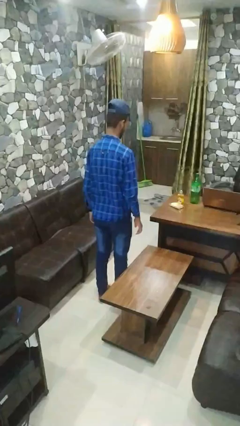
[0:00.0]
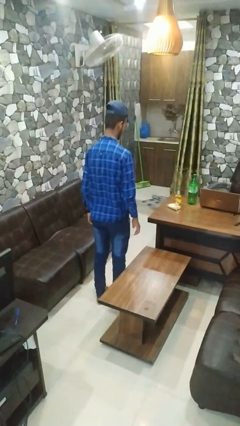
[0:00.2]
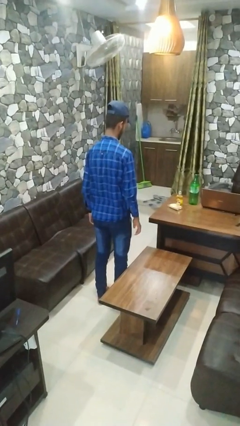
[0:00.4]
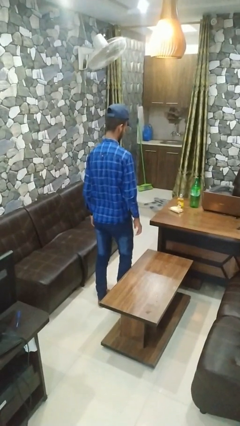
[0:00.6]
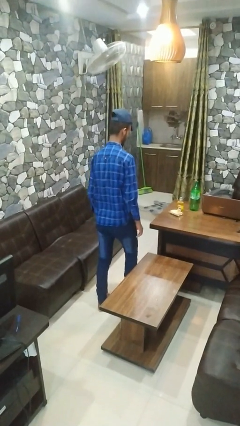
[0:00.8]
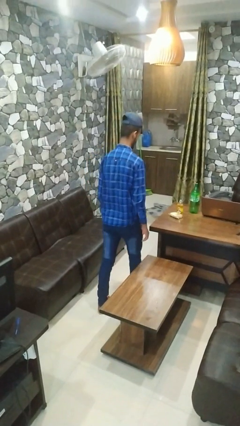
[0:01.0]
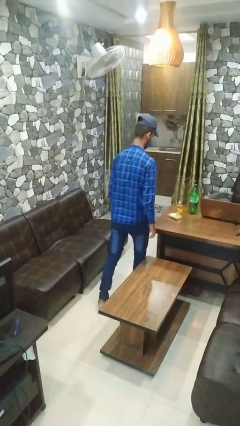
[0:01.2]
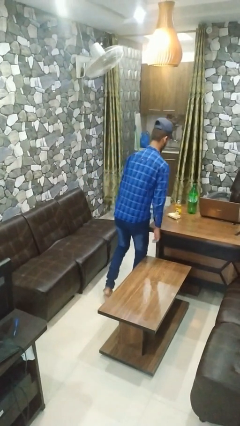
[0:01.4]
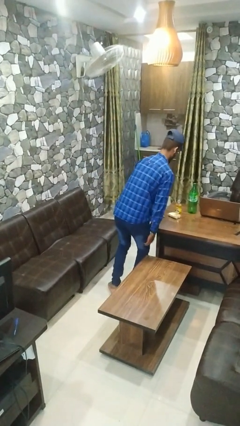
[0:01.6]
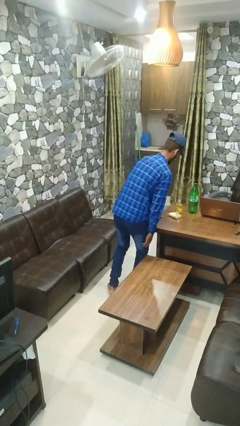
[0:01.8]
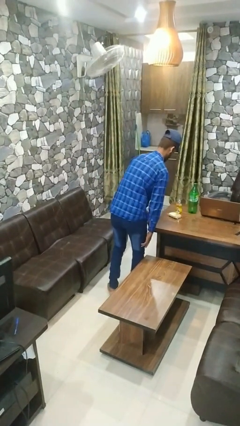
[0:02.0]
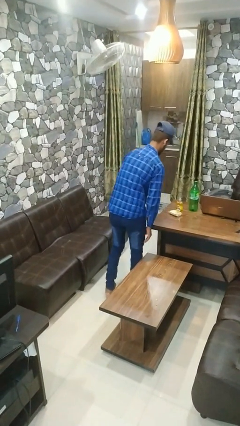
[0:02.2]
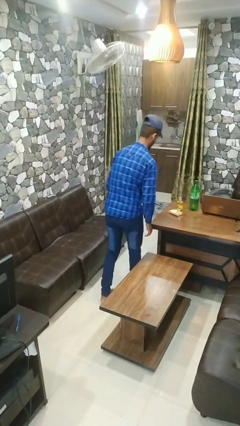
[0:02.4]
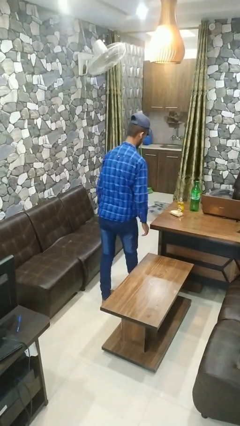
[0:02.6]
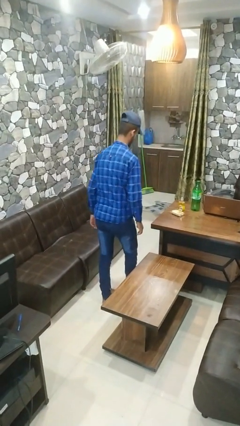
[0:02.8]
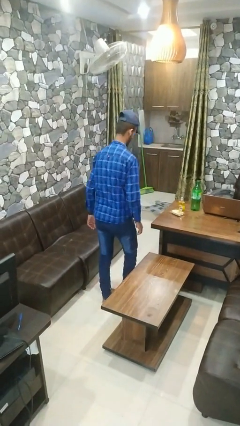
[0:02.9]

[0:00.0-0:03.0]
person bumps into table

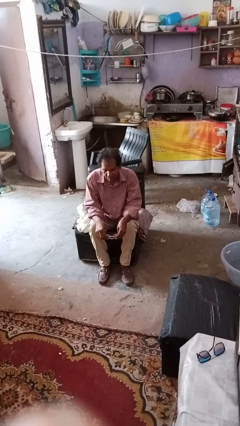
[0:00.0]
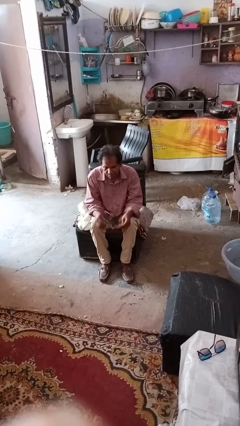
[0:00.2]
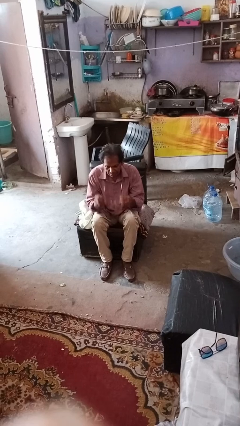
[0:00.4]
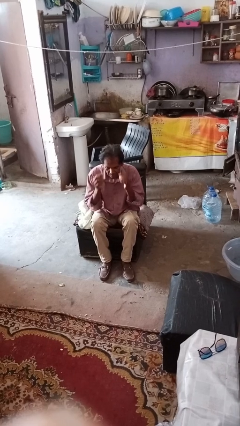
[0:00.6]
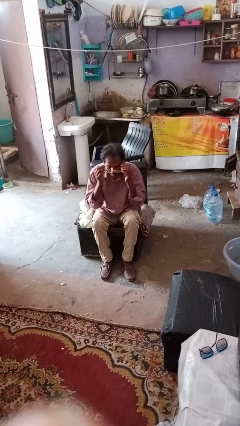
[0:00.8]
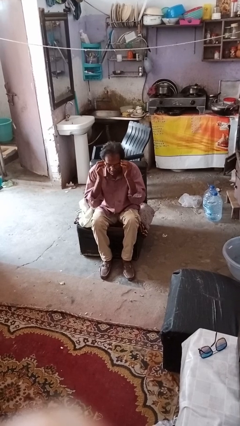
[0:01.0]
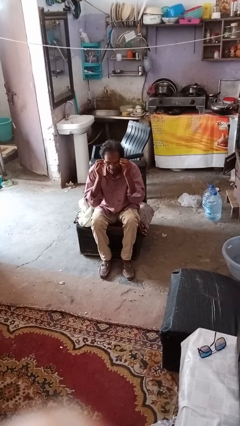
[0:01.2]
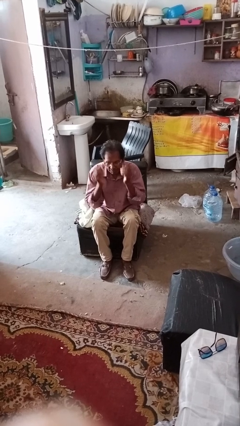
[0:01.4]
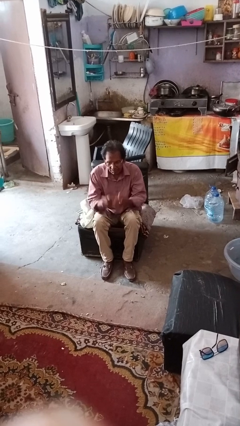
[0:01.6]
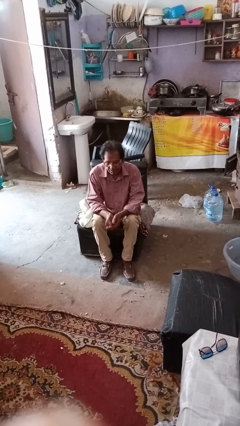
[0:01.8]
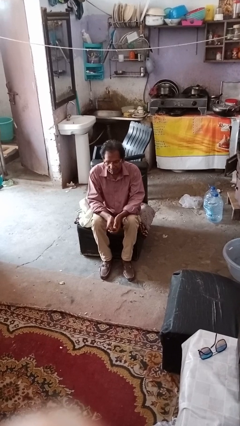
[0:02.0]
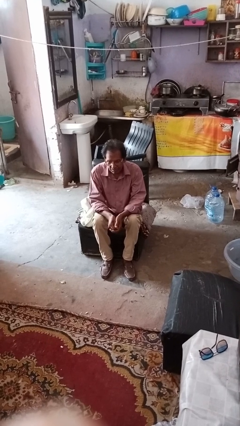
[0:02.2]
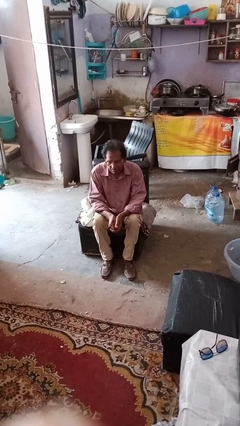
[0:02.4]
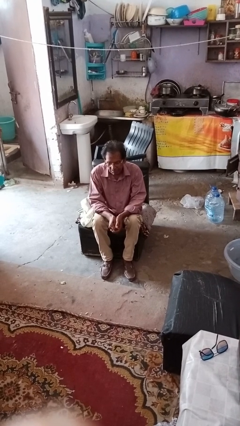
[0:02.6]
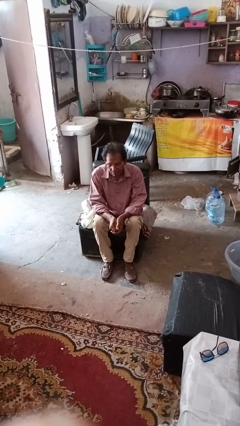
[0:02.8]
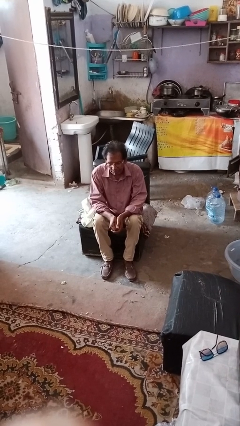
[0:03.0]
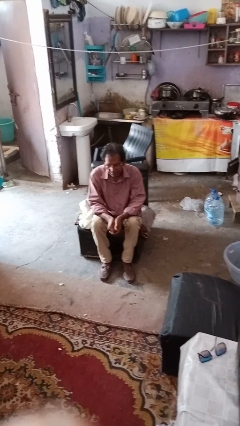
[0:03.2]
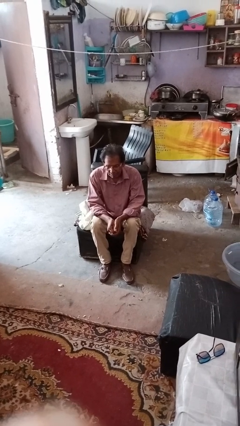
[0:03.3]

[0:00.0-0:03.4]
person puts on glasses

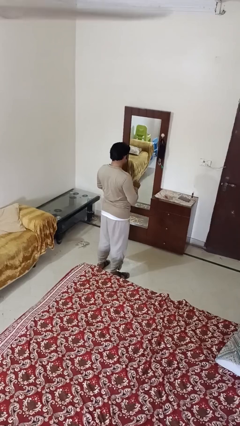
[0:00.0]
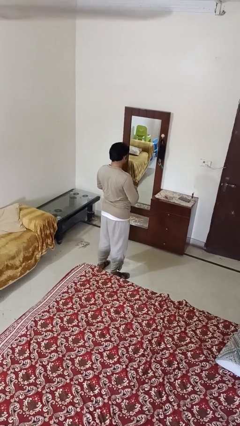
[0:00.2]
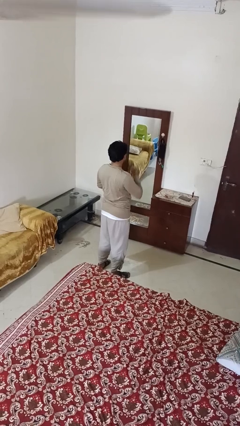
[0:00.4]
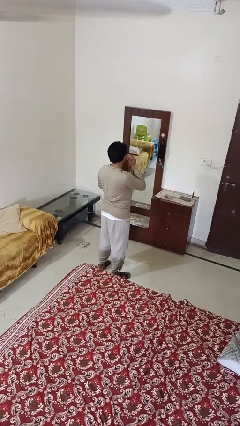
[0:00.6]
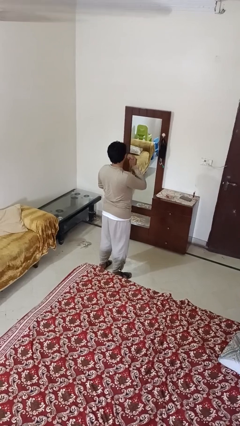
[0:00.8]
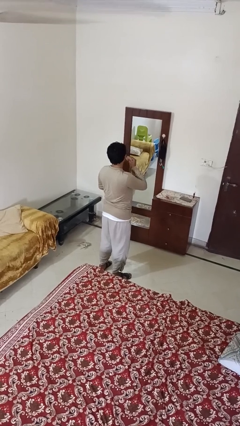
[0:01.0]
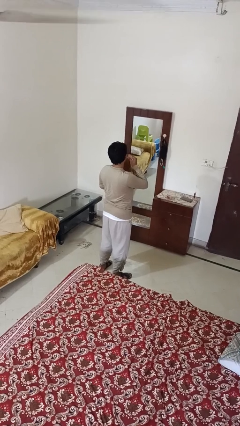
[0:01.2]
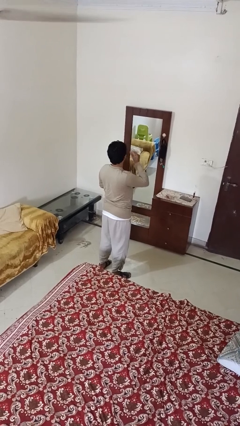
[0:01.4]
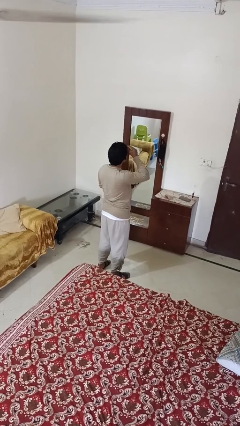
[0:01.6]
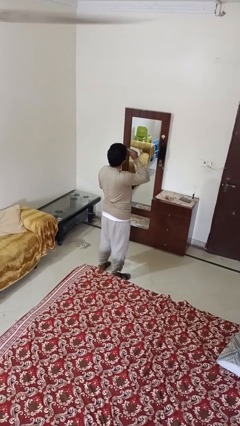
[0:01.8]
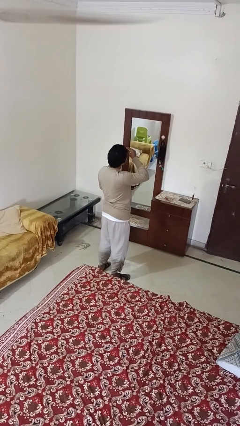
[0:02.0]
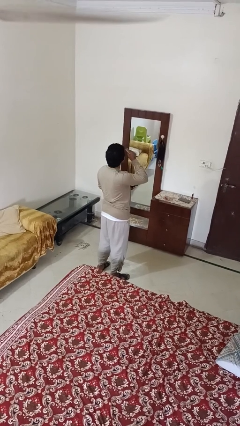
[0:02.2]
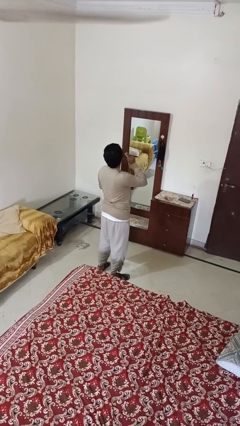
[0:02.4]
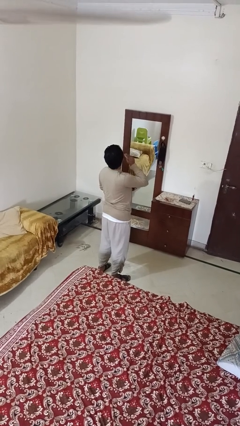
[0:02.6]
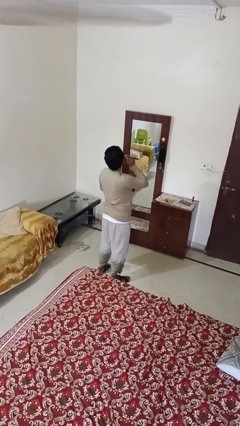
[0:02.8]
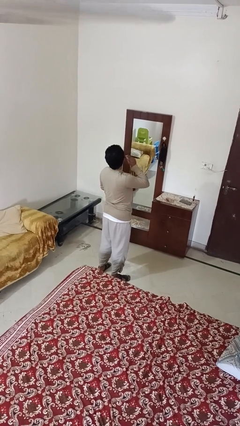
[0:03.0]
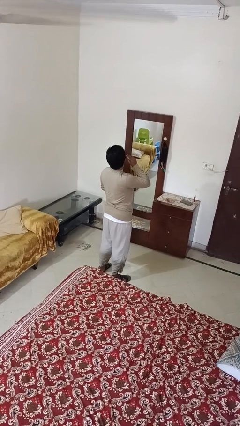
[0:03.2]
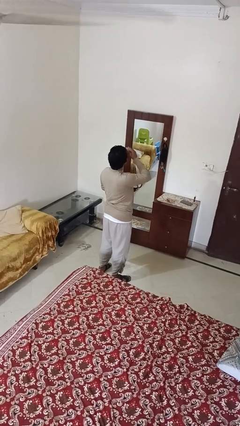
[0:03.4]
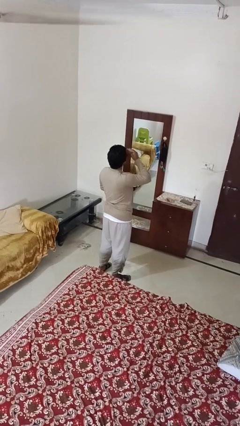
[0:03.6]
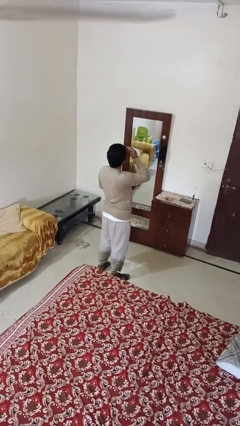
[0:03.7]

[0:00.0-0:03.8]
person applies foundation makeup

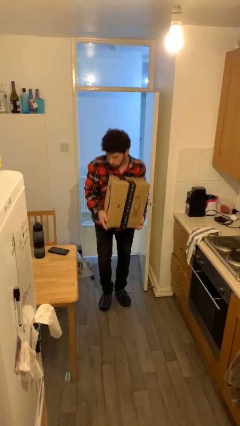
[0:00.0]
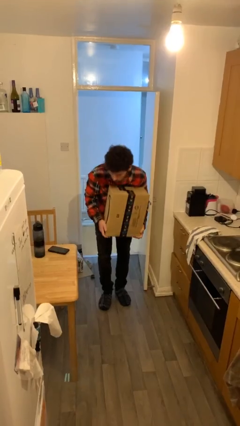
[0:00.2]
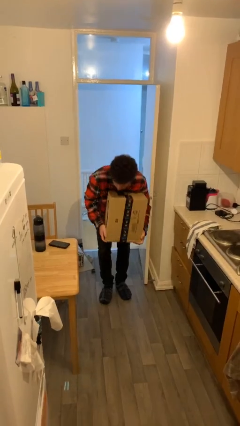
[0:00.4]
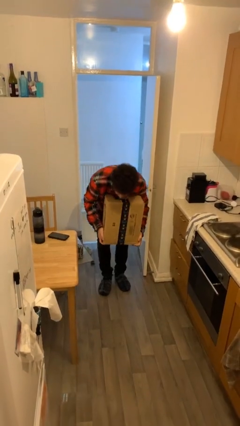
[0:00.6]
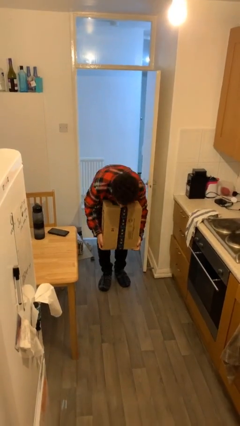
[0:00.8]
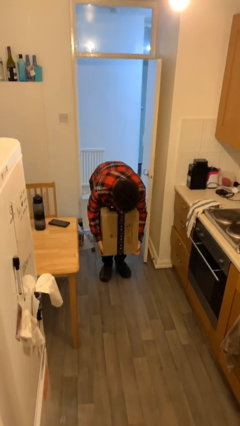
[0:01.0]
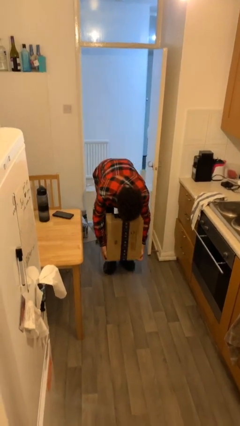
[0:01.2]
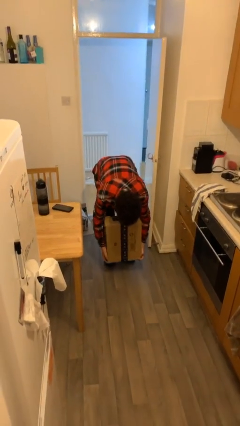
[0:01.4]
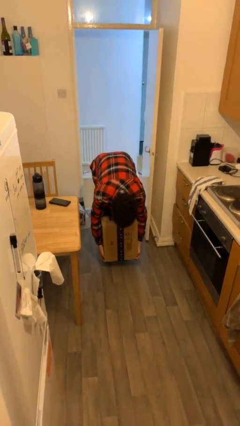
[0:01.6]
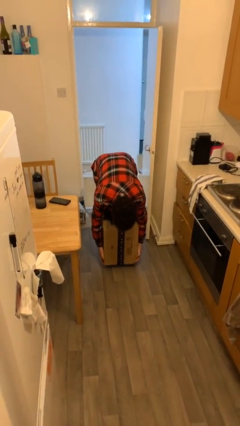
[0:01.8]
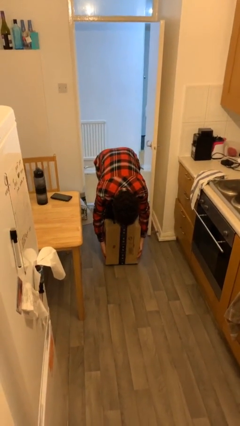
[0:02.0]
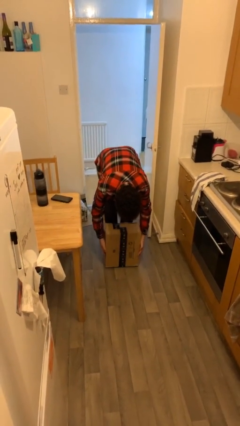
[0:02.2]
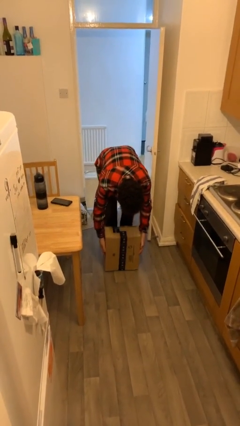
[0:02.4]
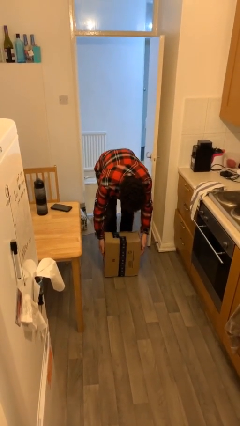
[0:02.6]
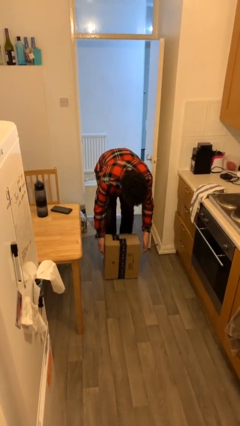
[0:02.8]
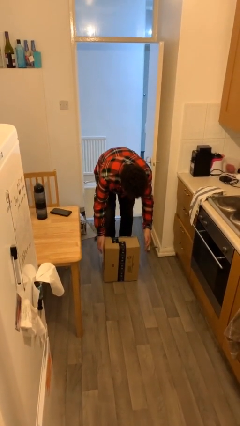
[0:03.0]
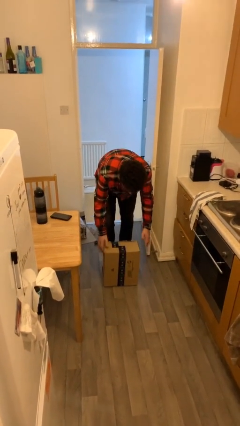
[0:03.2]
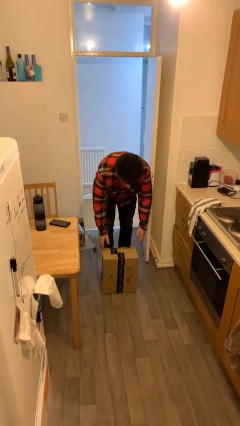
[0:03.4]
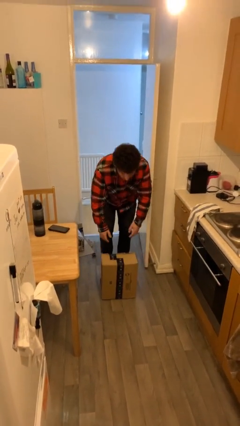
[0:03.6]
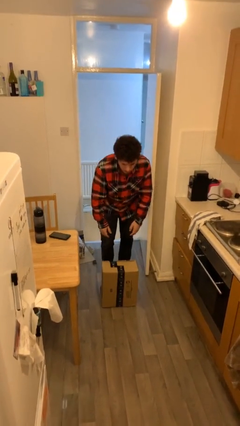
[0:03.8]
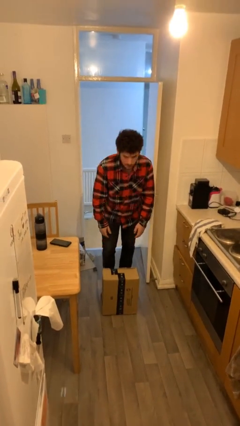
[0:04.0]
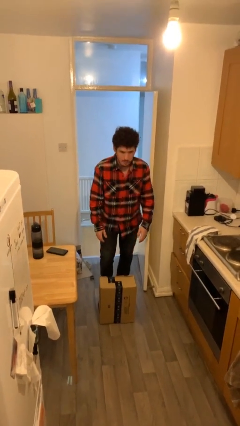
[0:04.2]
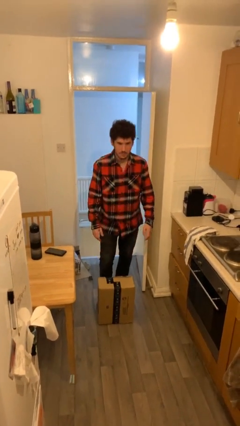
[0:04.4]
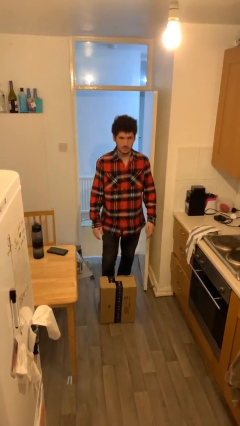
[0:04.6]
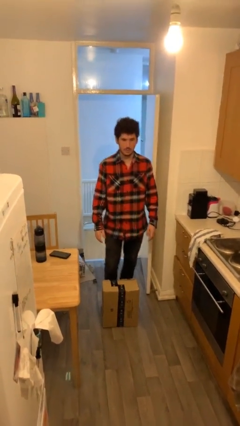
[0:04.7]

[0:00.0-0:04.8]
person puts down object on floor

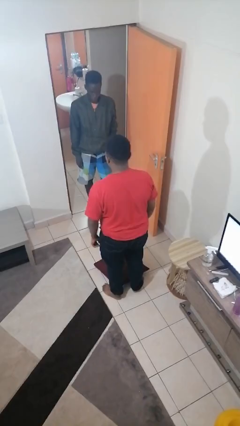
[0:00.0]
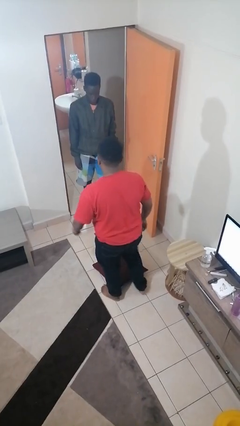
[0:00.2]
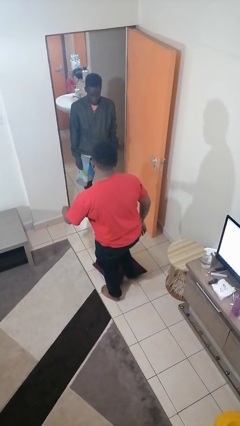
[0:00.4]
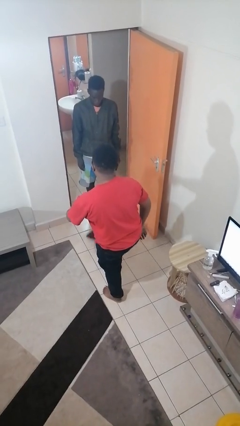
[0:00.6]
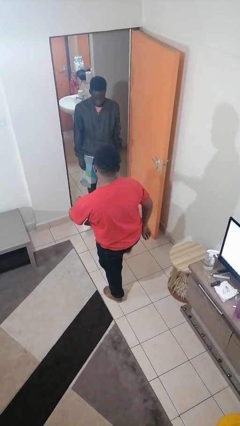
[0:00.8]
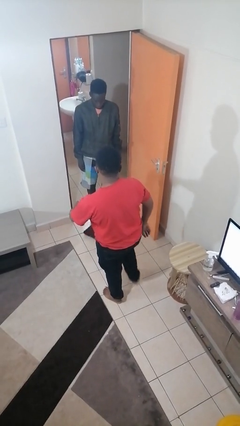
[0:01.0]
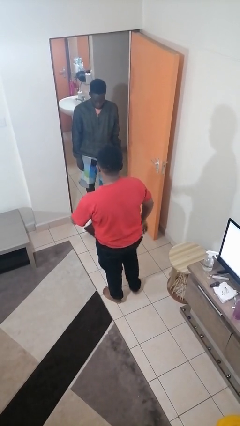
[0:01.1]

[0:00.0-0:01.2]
person kicks object to person

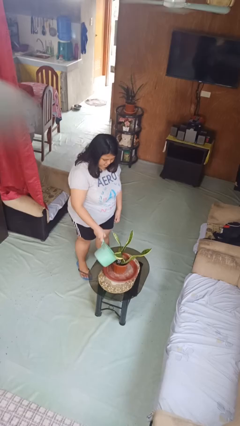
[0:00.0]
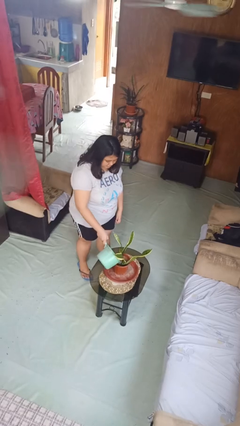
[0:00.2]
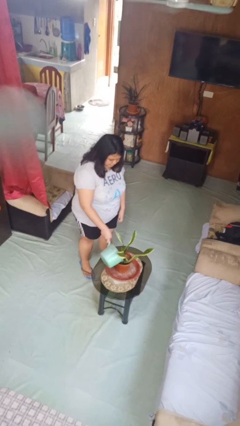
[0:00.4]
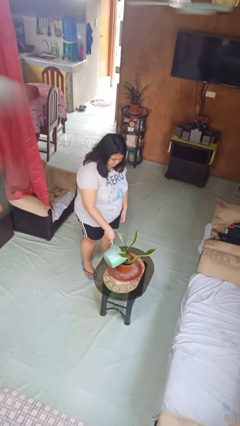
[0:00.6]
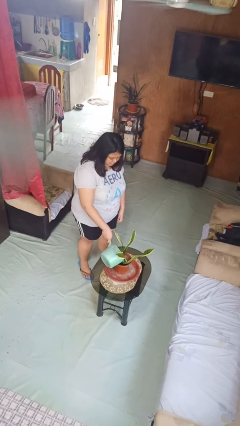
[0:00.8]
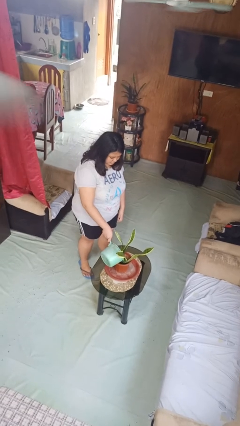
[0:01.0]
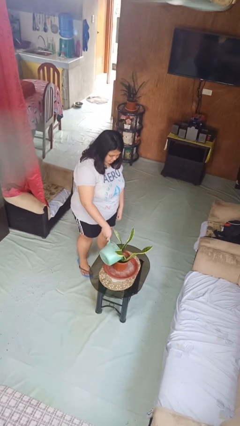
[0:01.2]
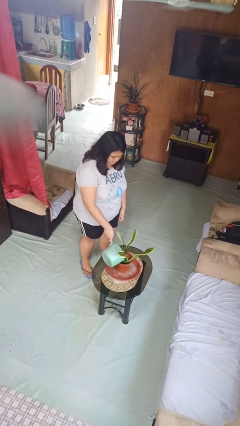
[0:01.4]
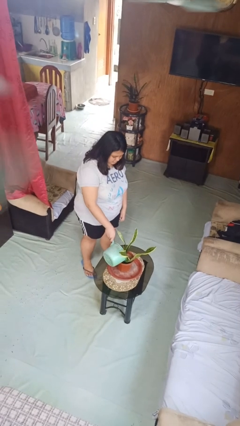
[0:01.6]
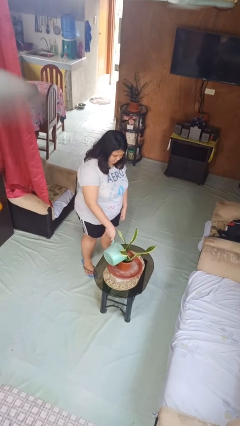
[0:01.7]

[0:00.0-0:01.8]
person waters houseplant
